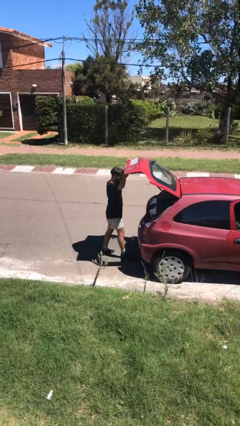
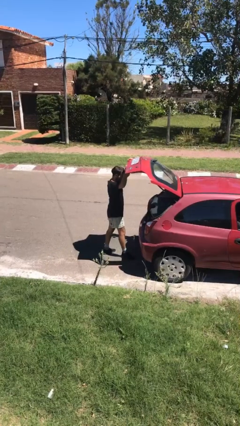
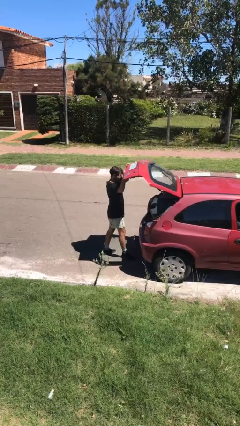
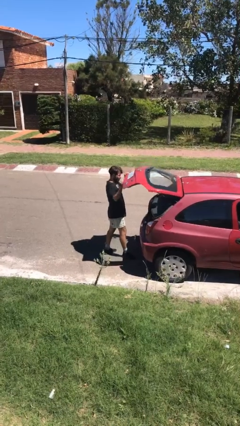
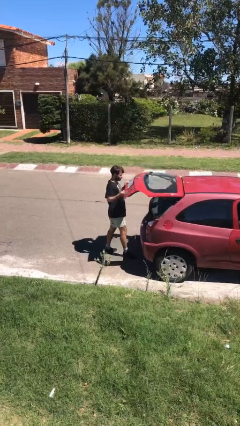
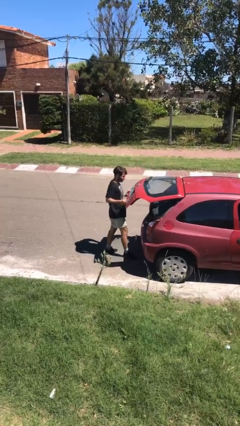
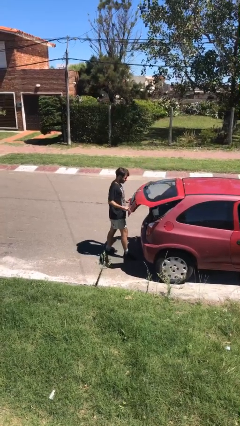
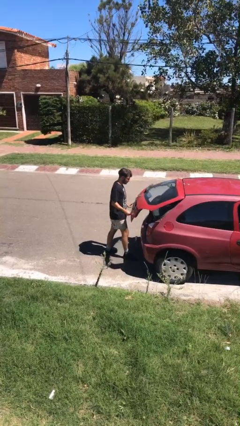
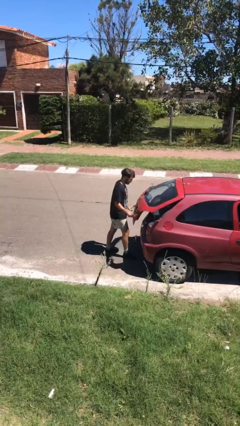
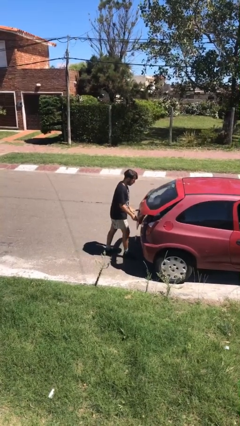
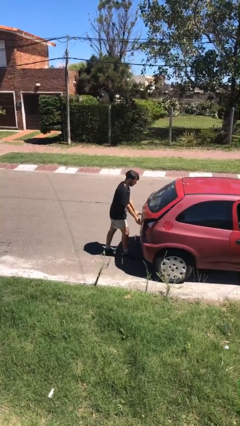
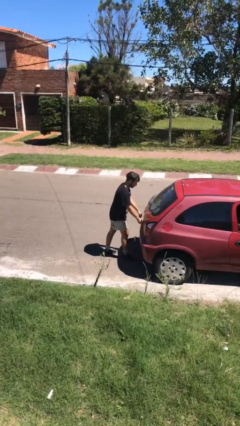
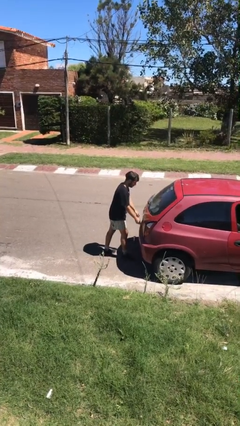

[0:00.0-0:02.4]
person closes car trunk

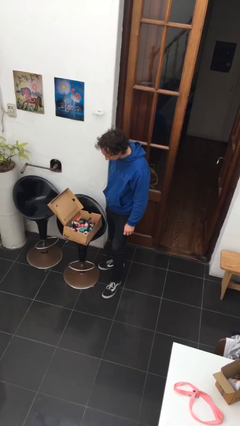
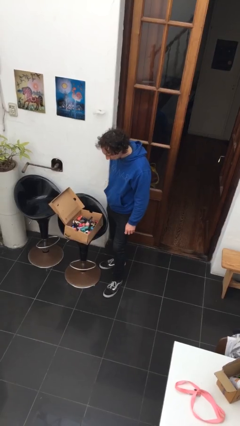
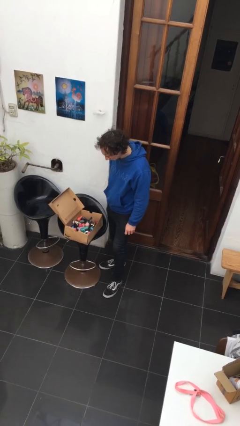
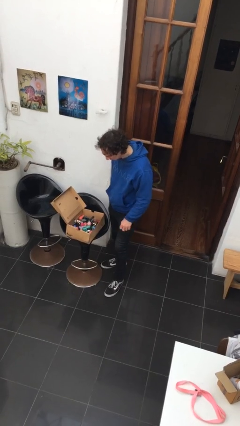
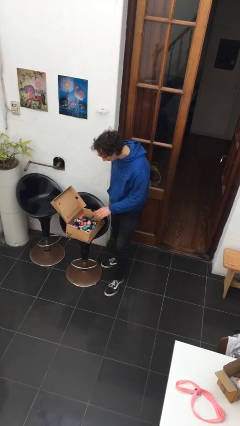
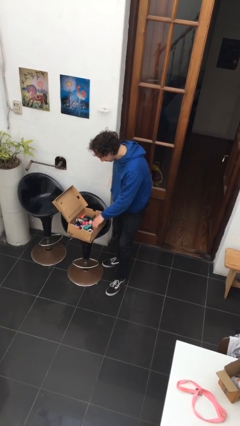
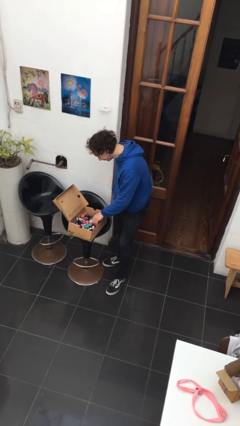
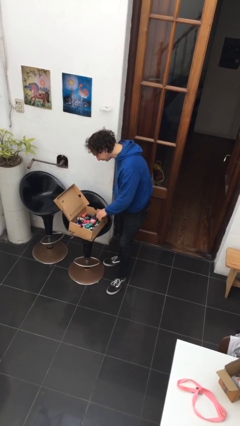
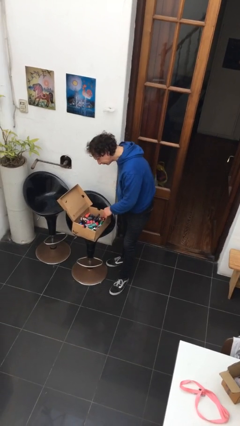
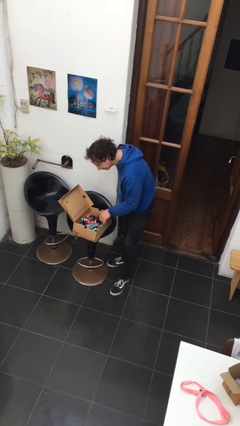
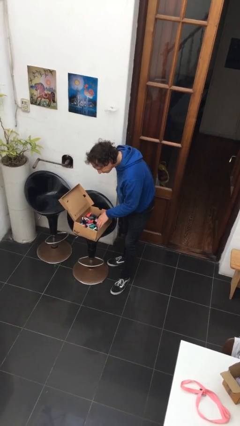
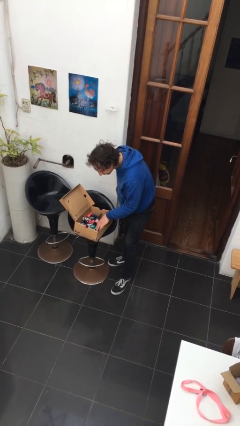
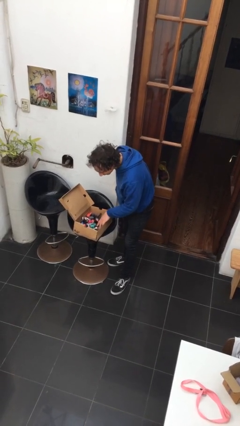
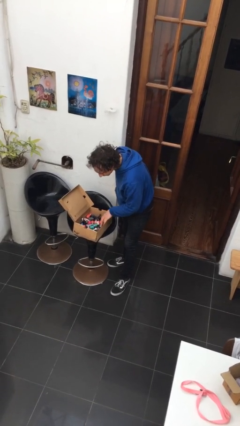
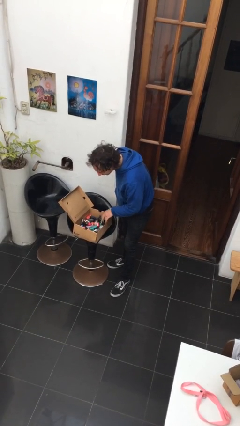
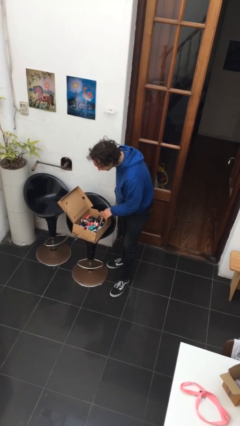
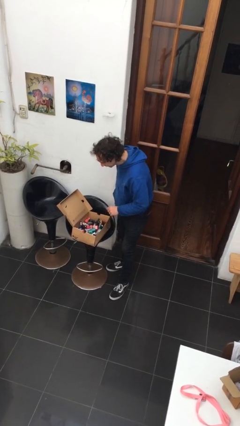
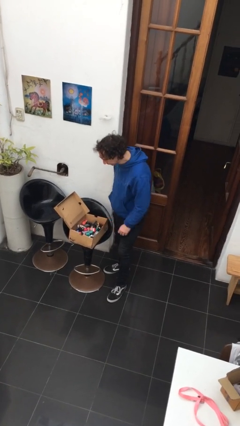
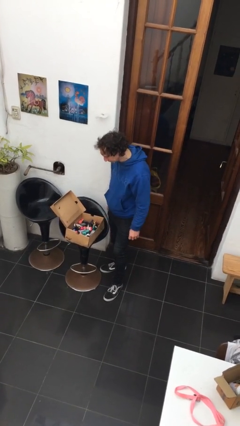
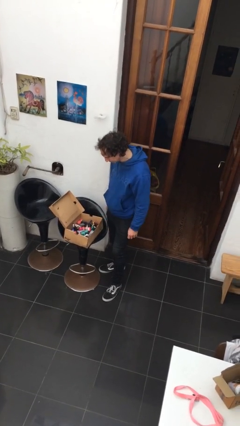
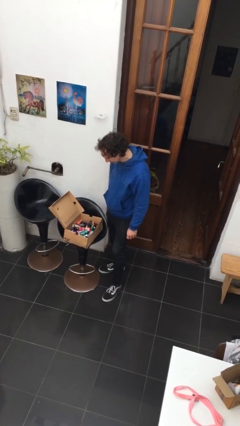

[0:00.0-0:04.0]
person searches in box

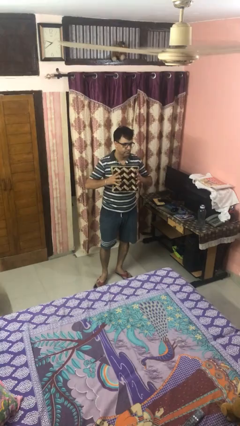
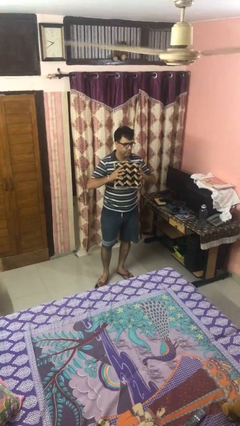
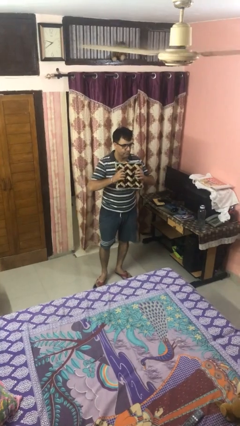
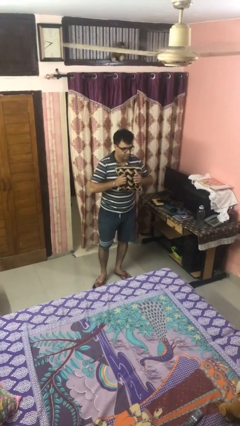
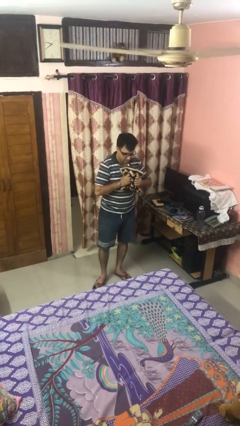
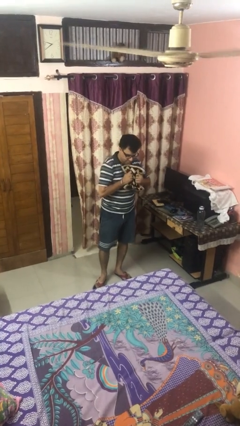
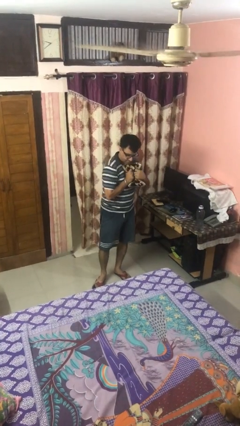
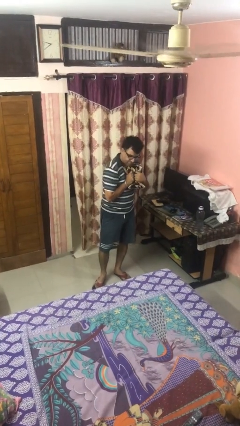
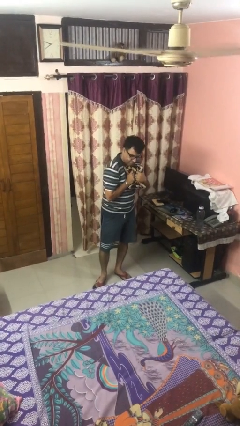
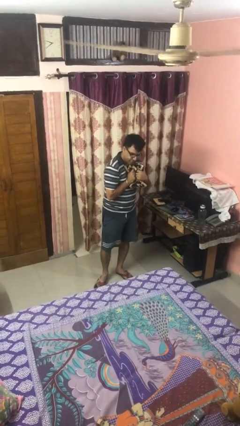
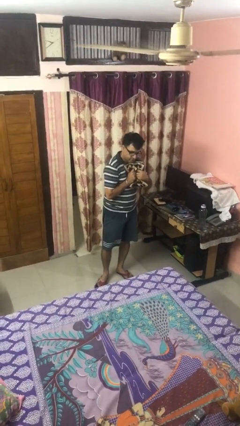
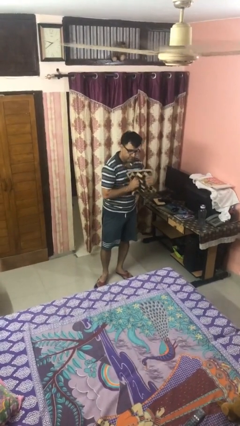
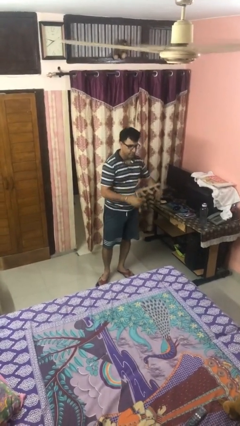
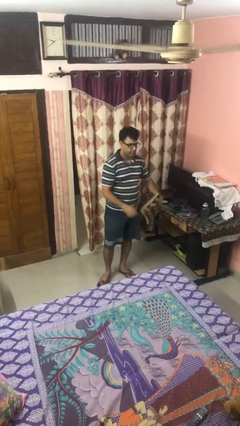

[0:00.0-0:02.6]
person squeezes object

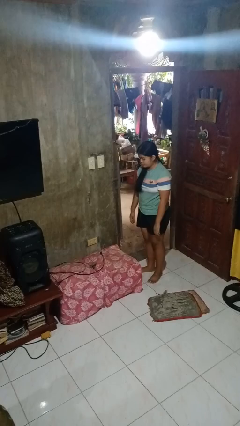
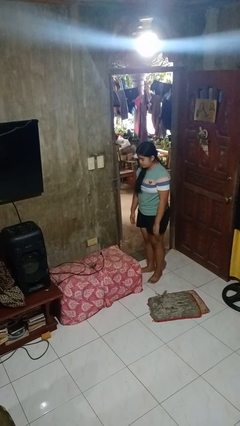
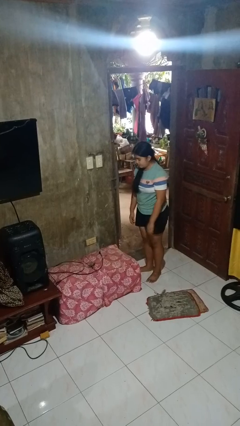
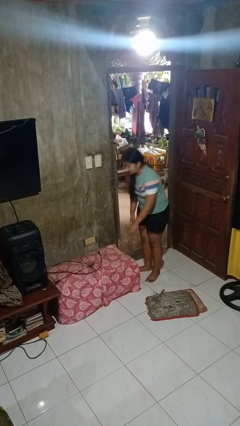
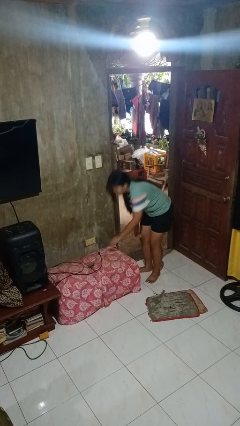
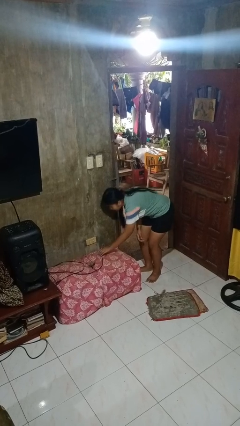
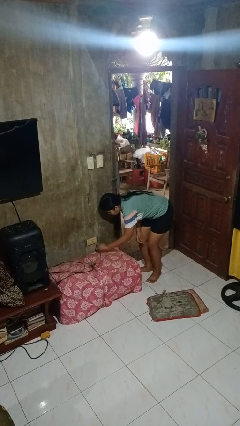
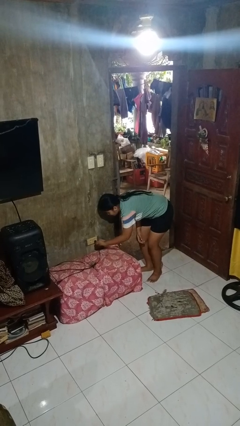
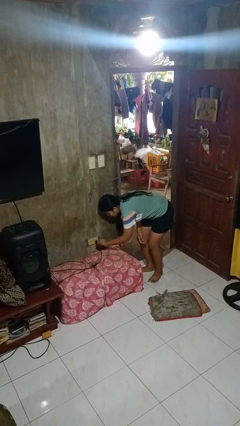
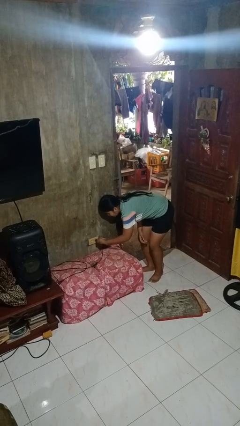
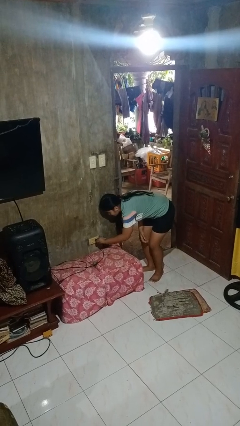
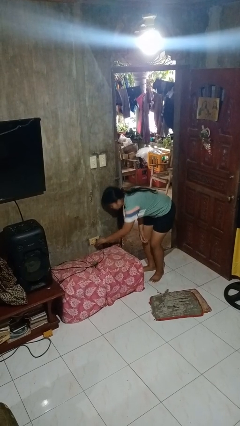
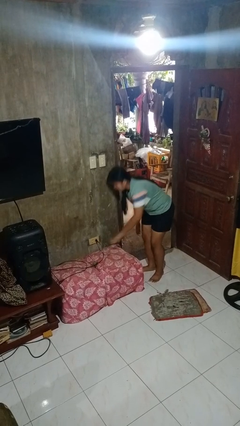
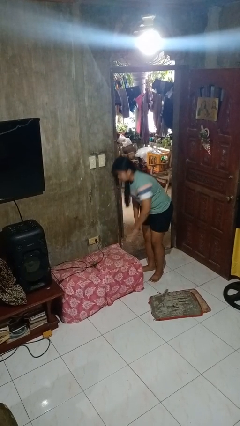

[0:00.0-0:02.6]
person plugs into electrical socket

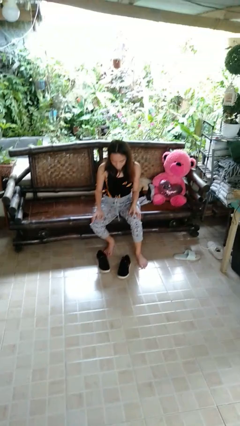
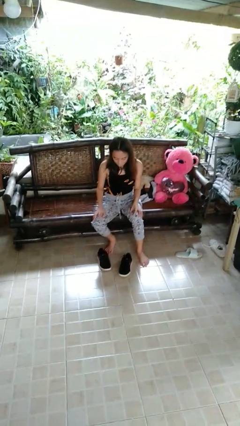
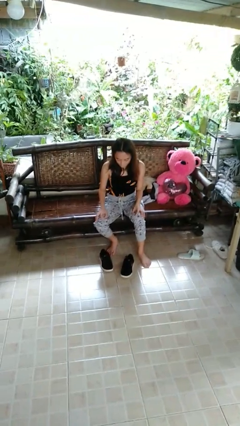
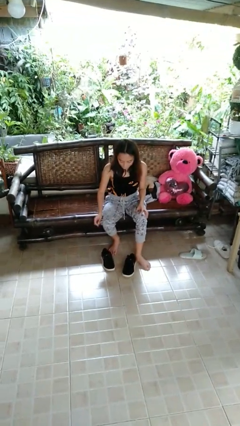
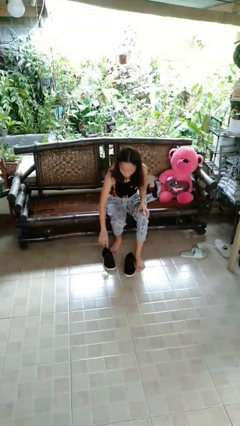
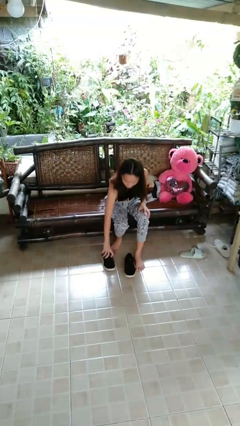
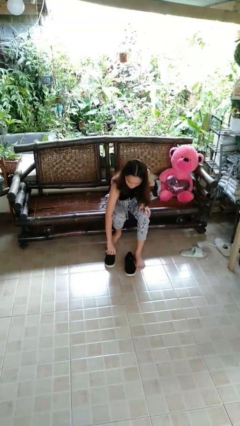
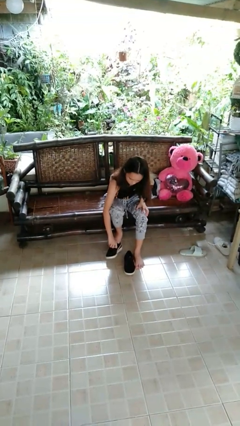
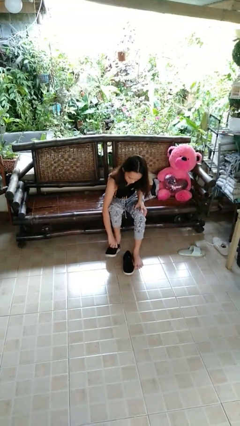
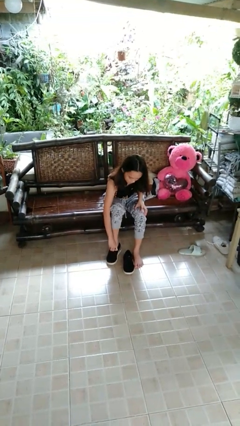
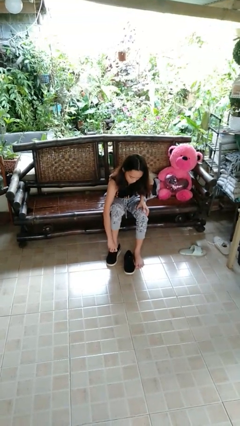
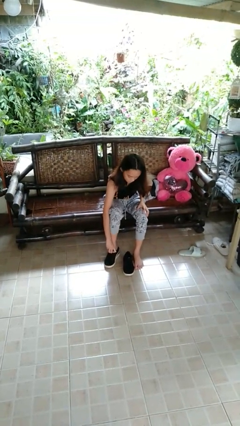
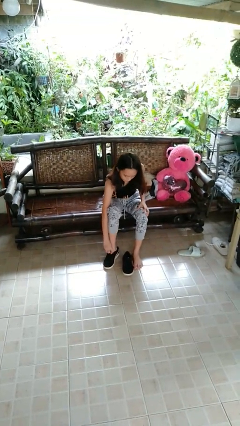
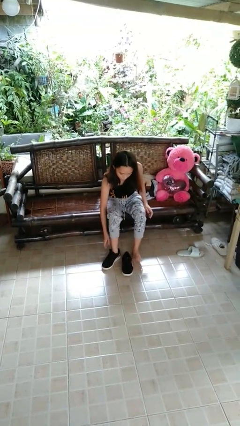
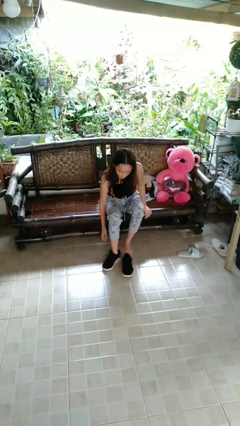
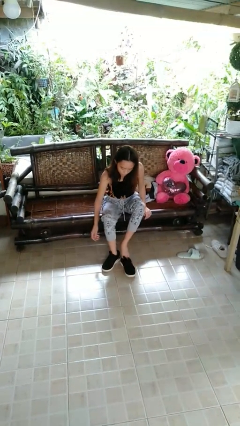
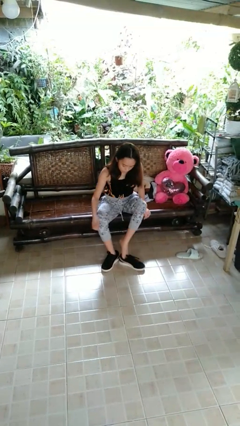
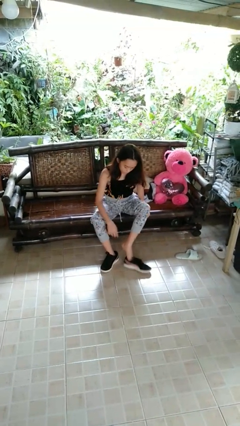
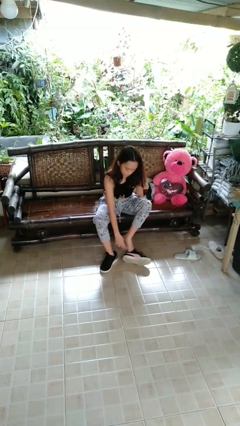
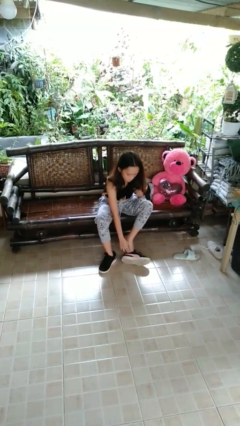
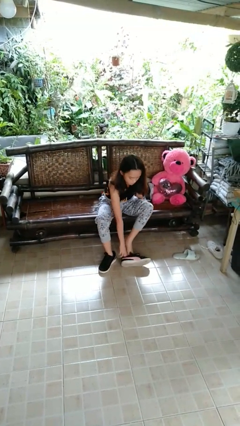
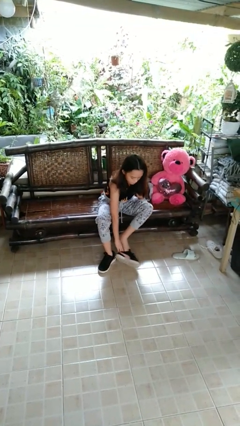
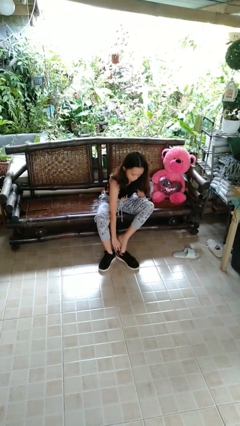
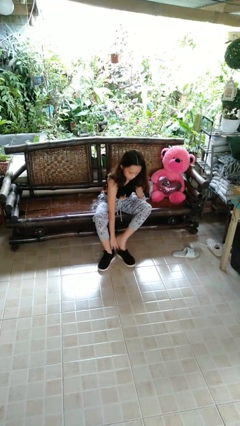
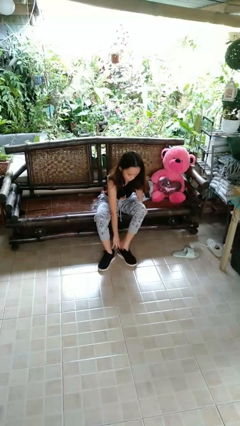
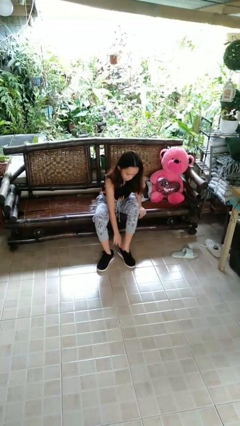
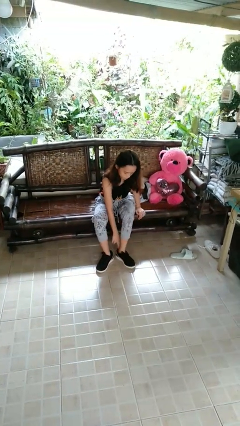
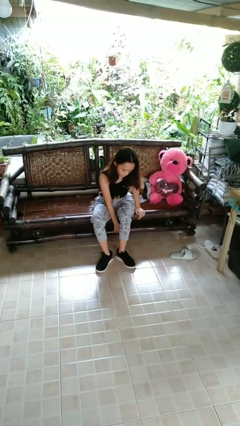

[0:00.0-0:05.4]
person puts on shoes

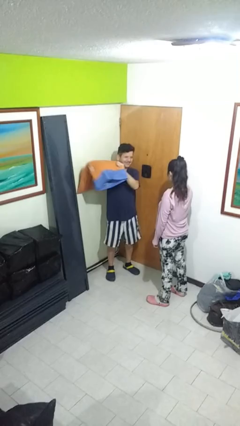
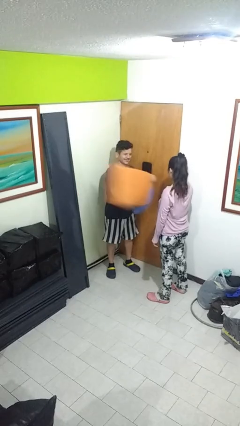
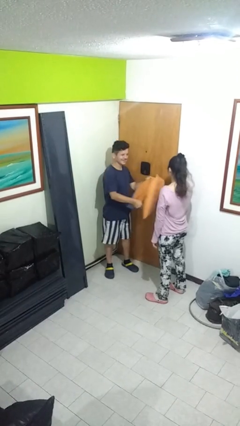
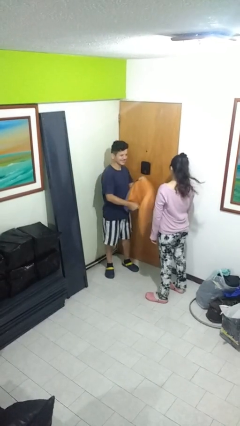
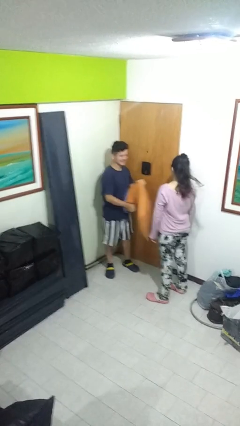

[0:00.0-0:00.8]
person hits person with pillow
